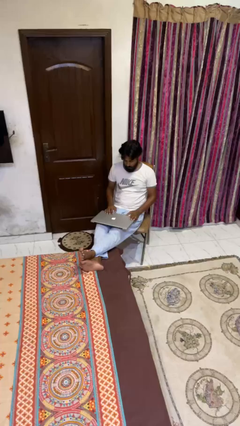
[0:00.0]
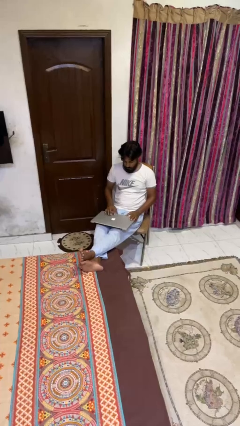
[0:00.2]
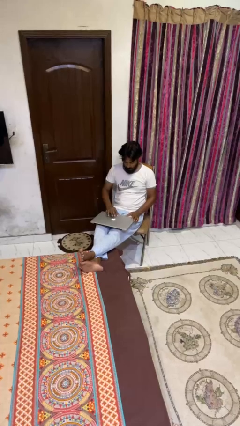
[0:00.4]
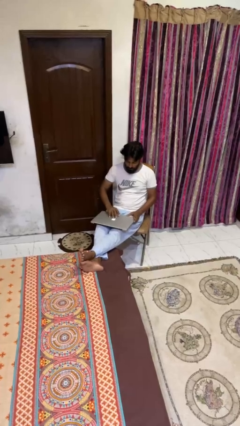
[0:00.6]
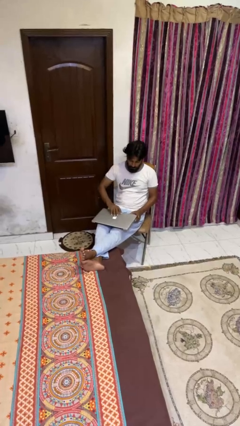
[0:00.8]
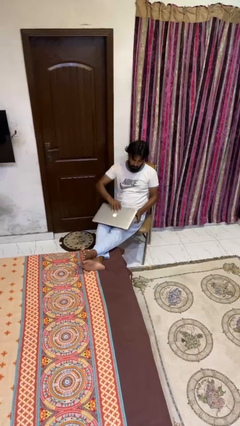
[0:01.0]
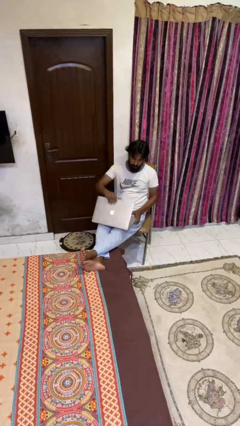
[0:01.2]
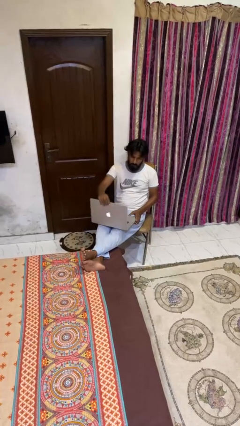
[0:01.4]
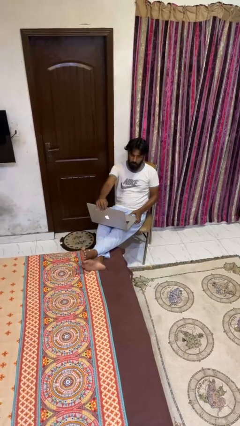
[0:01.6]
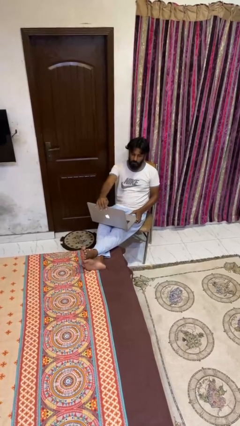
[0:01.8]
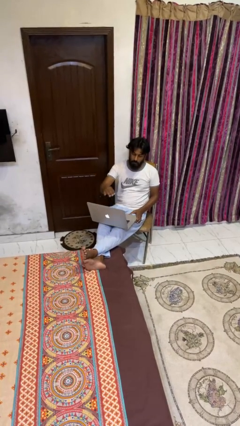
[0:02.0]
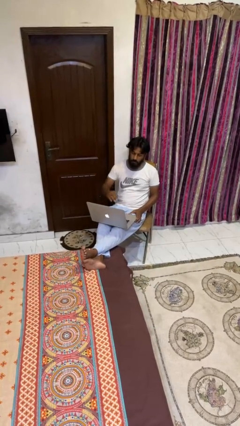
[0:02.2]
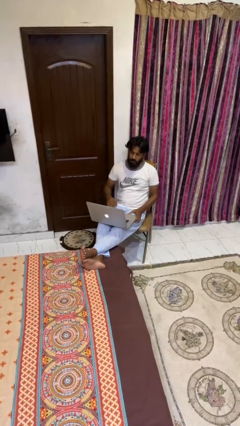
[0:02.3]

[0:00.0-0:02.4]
person opens laptop

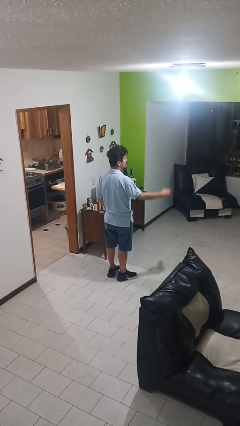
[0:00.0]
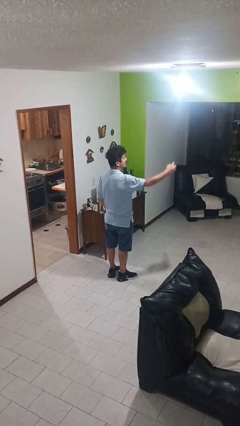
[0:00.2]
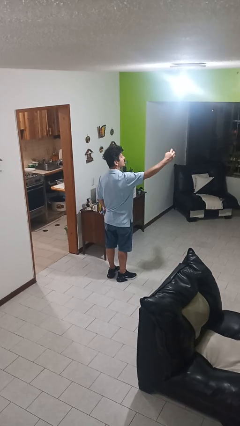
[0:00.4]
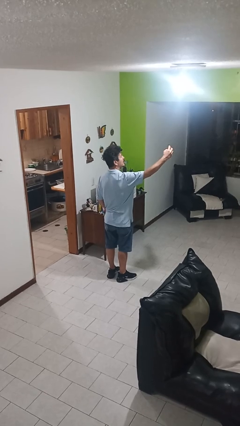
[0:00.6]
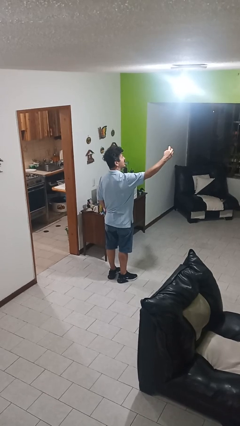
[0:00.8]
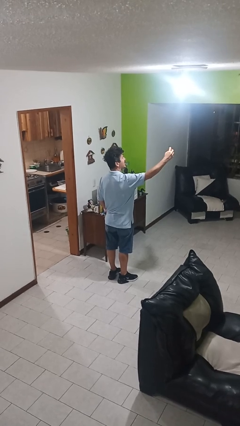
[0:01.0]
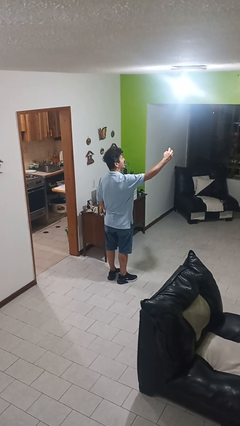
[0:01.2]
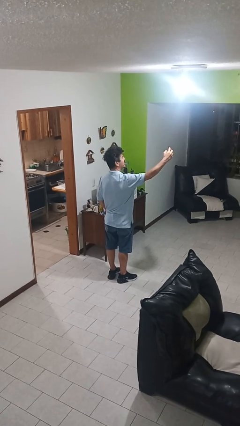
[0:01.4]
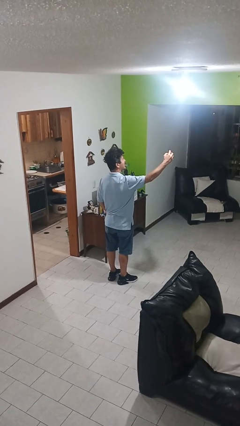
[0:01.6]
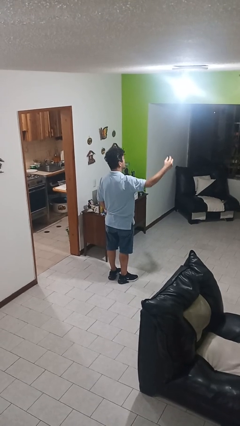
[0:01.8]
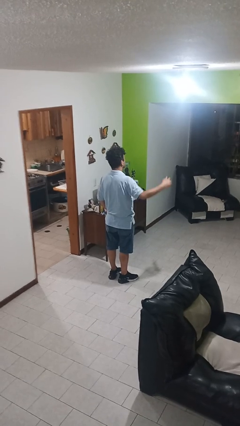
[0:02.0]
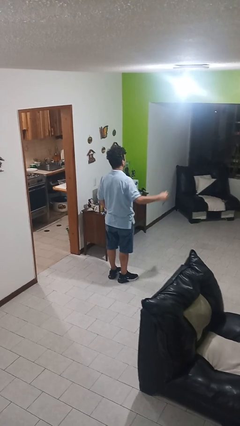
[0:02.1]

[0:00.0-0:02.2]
person takes selfie

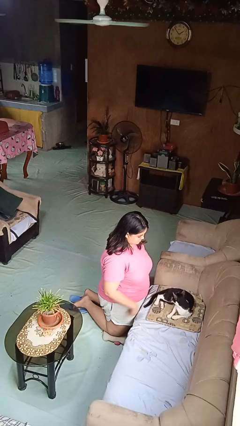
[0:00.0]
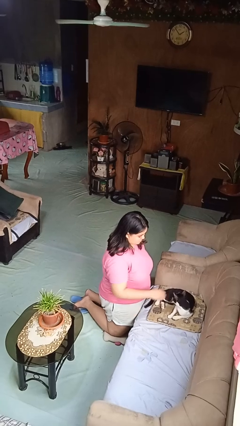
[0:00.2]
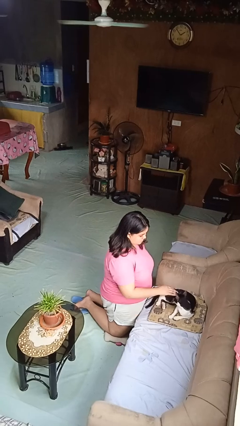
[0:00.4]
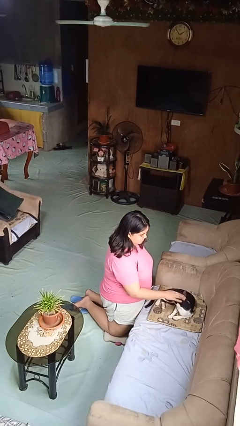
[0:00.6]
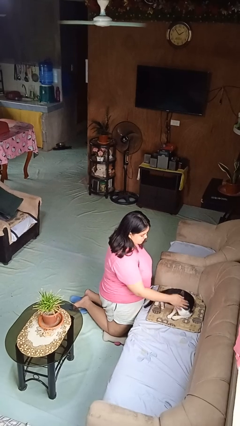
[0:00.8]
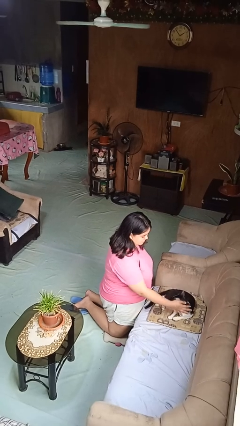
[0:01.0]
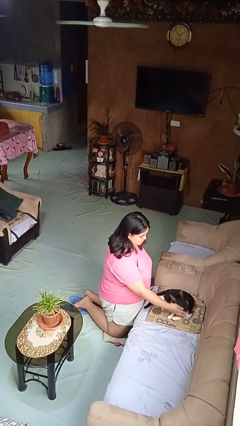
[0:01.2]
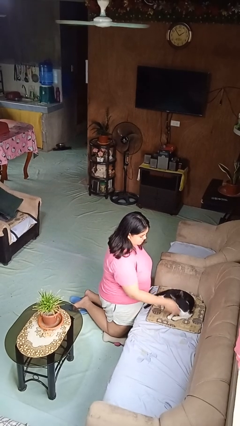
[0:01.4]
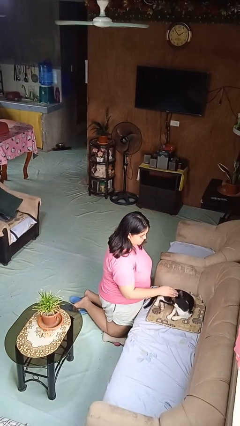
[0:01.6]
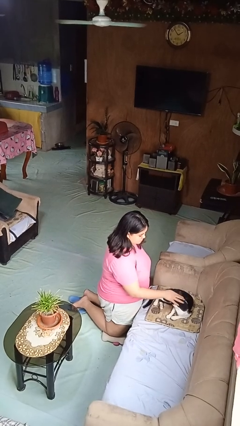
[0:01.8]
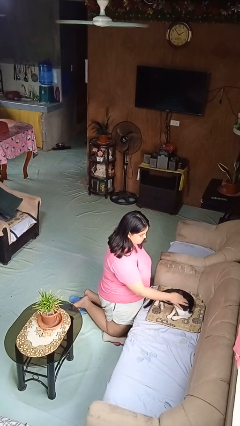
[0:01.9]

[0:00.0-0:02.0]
person pets cat

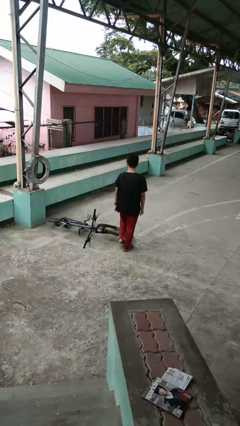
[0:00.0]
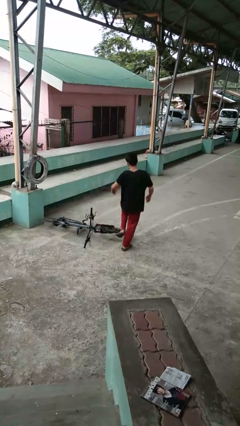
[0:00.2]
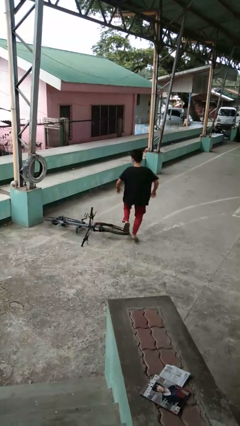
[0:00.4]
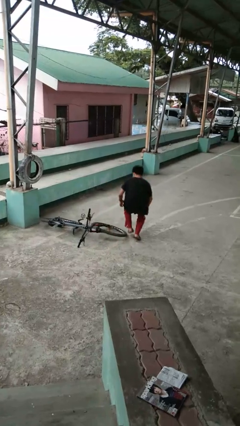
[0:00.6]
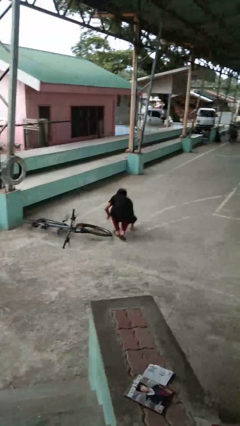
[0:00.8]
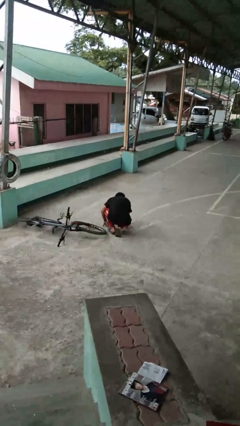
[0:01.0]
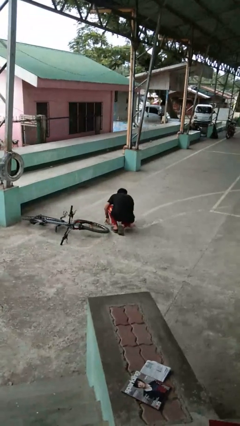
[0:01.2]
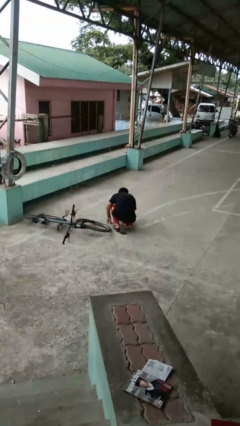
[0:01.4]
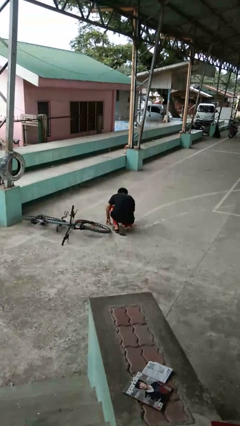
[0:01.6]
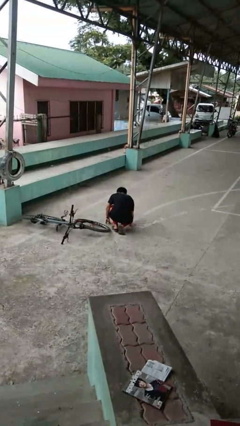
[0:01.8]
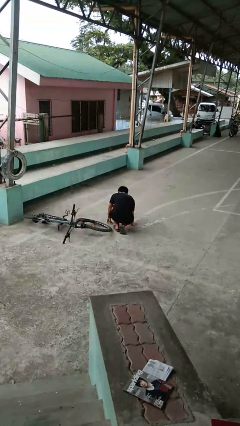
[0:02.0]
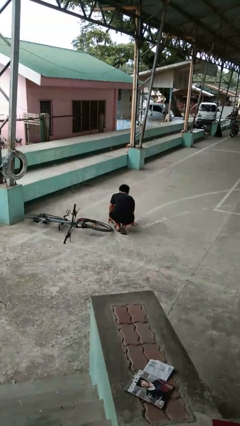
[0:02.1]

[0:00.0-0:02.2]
person trips on object on floor

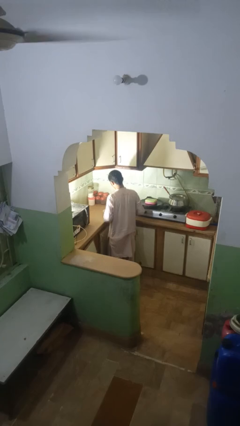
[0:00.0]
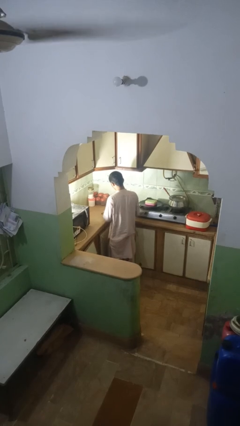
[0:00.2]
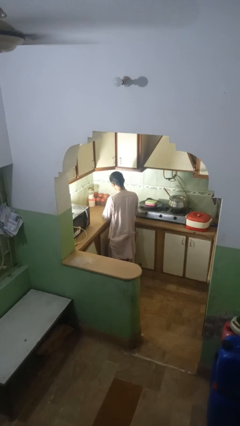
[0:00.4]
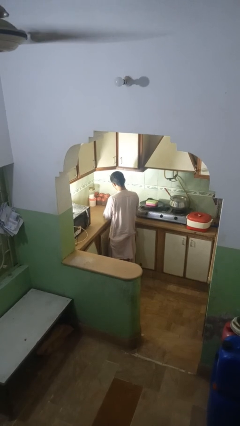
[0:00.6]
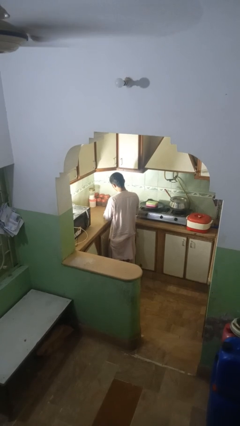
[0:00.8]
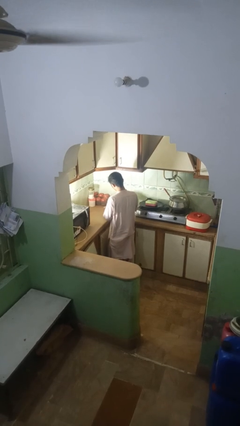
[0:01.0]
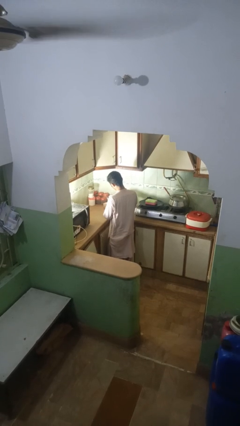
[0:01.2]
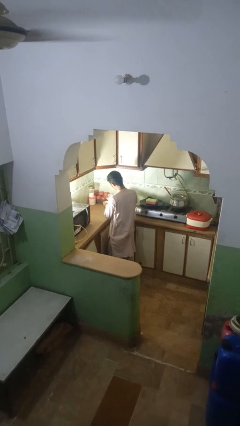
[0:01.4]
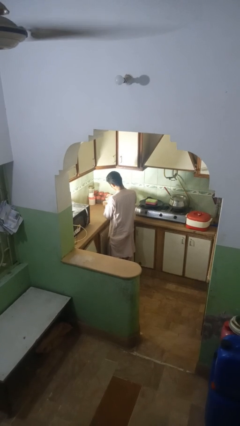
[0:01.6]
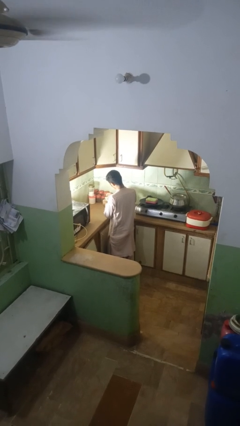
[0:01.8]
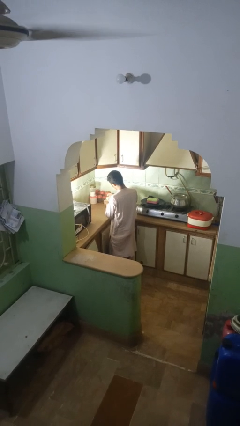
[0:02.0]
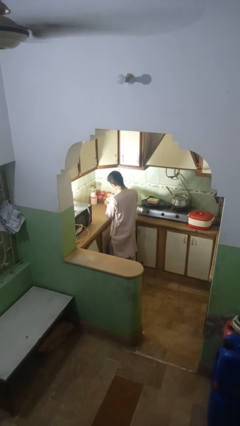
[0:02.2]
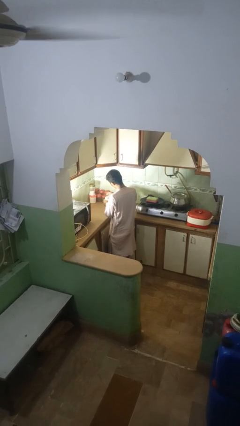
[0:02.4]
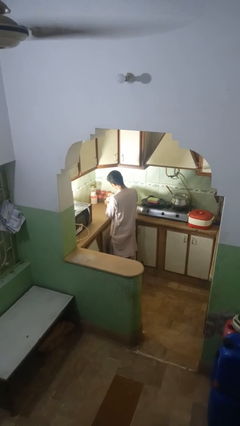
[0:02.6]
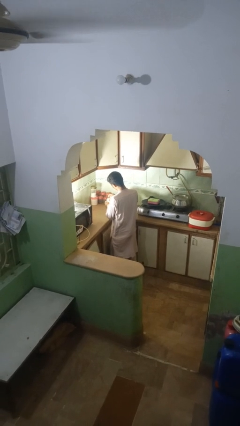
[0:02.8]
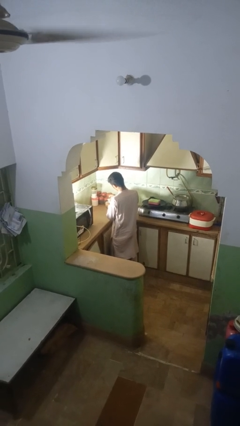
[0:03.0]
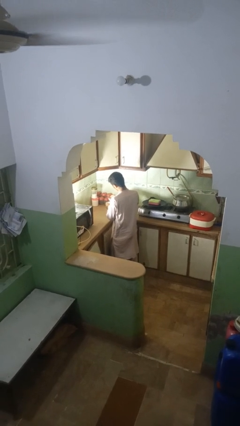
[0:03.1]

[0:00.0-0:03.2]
person pours into bowl

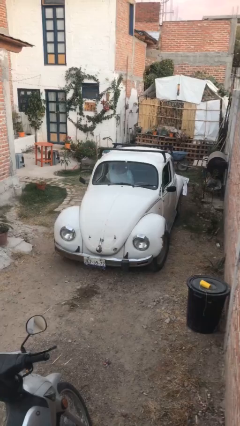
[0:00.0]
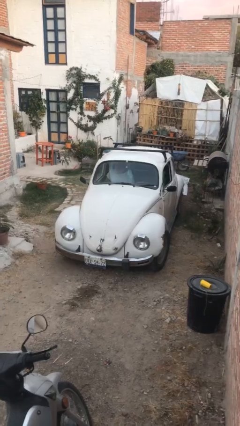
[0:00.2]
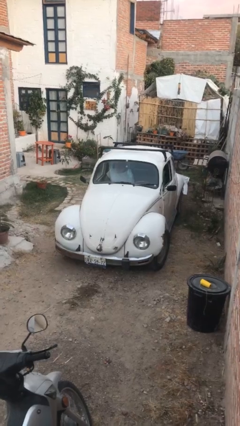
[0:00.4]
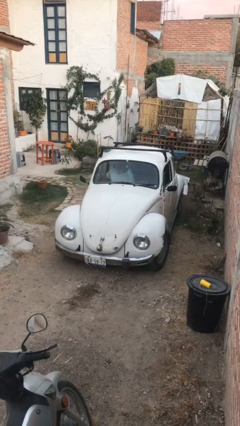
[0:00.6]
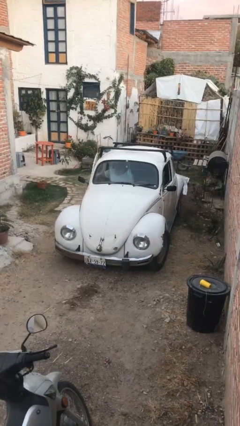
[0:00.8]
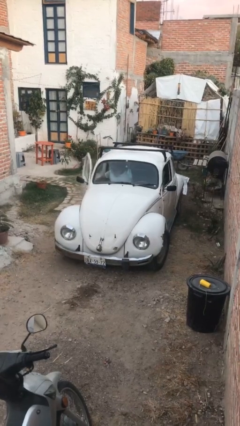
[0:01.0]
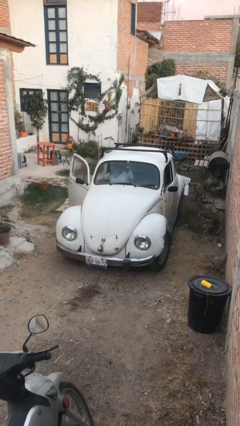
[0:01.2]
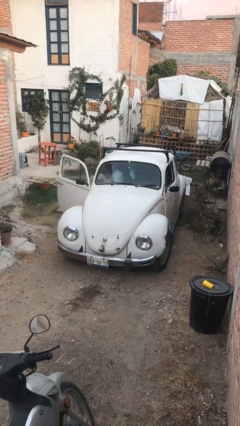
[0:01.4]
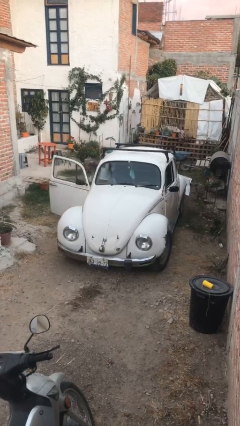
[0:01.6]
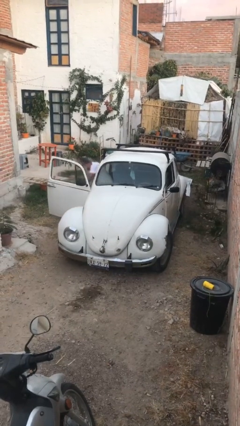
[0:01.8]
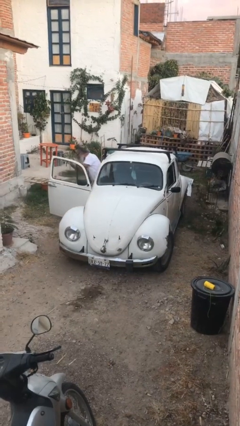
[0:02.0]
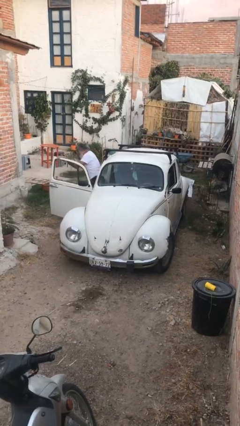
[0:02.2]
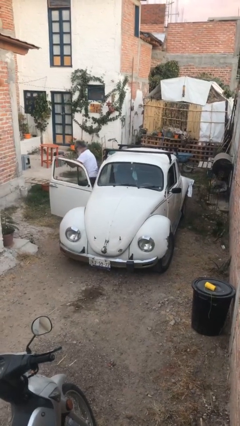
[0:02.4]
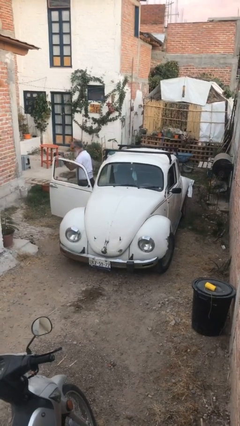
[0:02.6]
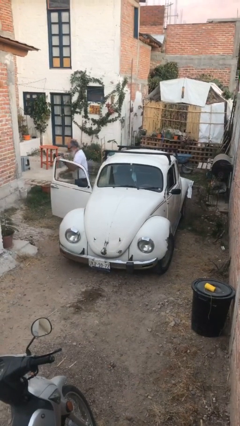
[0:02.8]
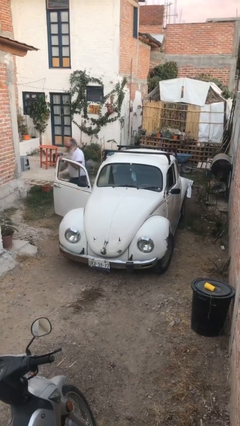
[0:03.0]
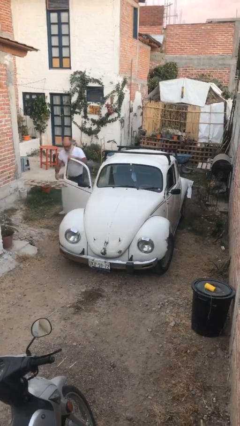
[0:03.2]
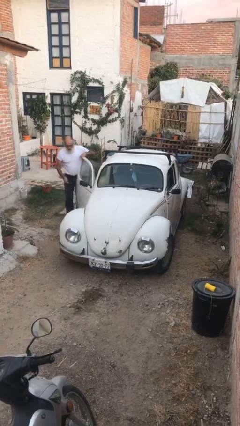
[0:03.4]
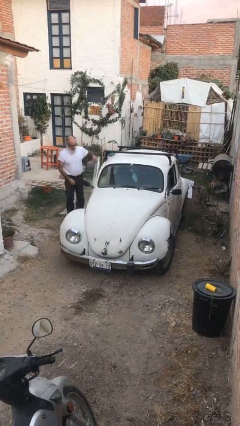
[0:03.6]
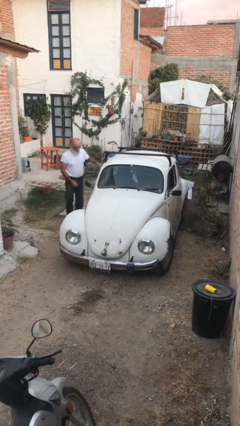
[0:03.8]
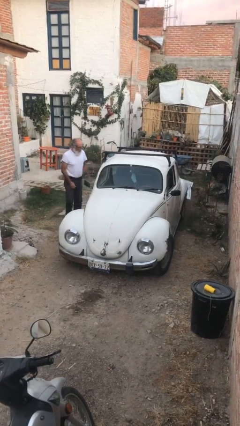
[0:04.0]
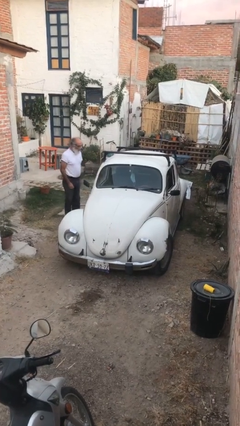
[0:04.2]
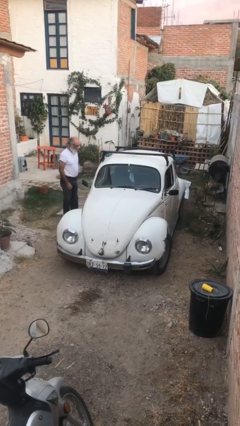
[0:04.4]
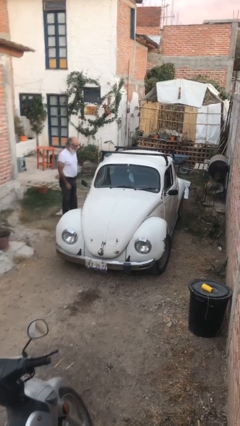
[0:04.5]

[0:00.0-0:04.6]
car drops off person

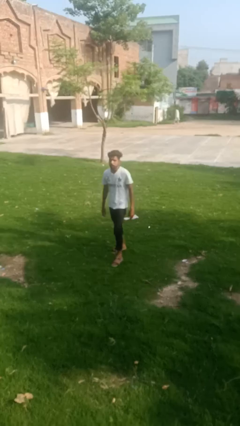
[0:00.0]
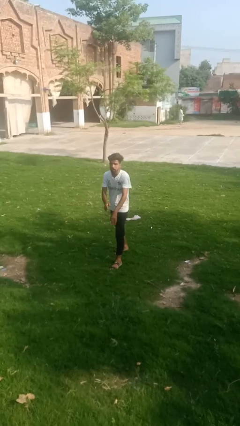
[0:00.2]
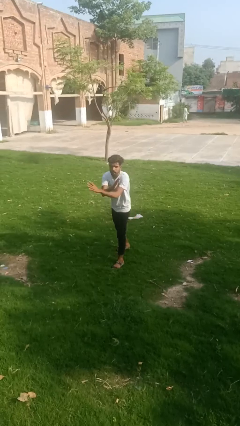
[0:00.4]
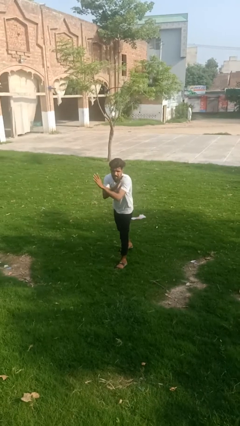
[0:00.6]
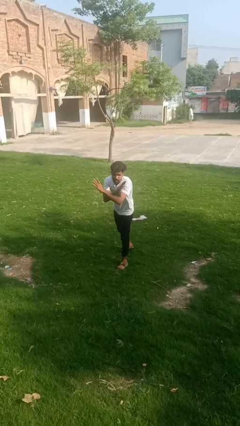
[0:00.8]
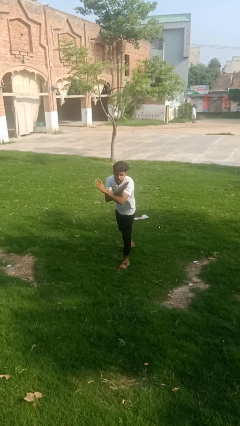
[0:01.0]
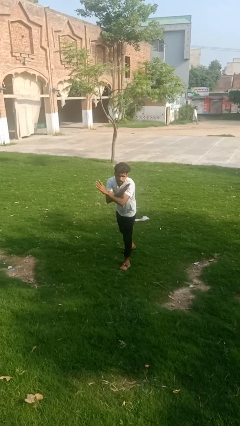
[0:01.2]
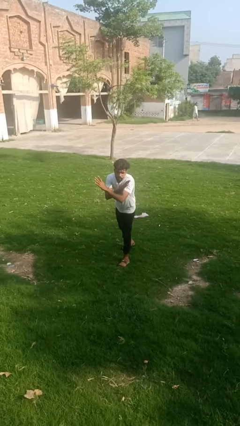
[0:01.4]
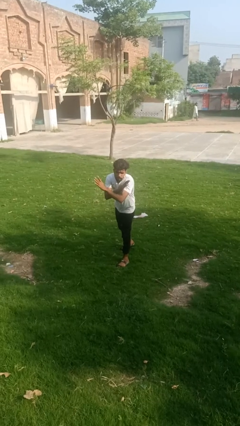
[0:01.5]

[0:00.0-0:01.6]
person crosses arms
